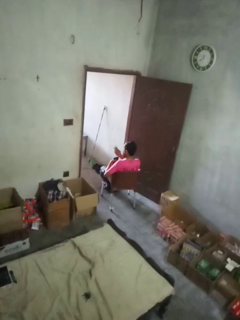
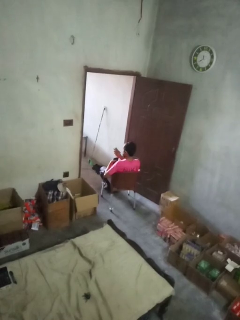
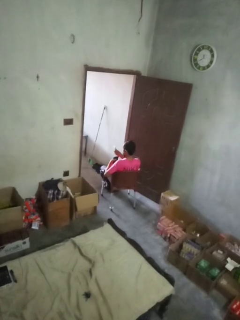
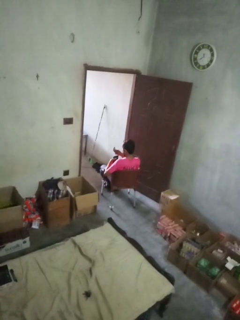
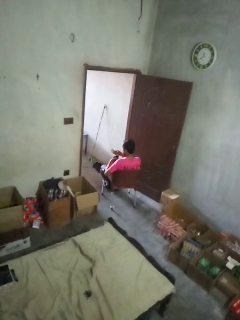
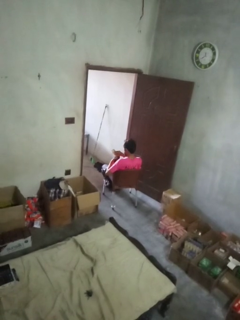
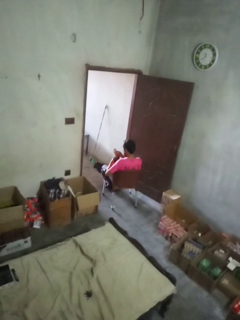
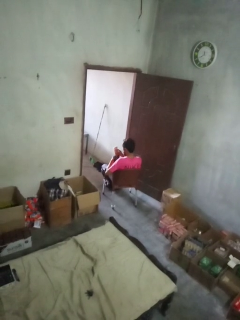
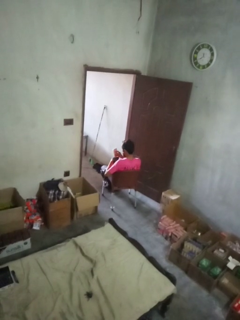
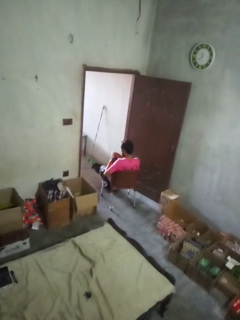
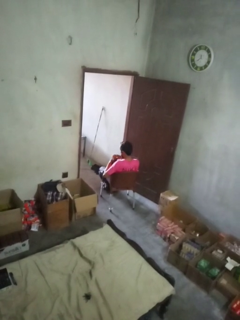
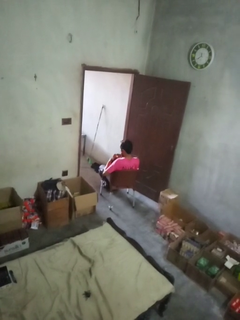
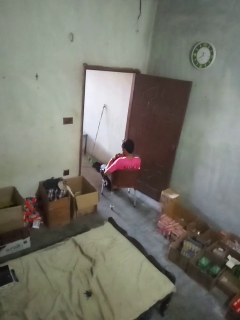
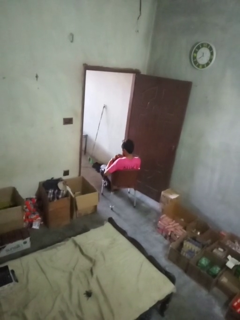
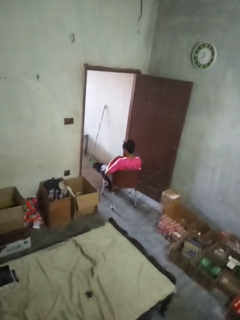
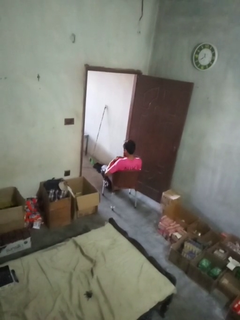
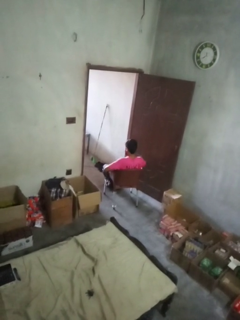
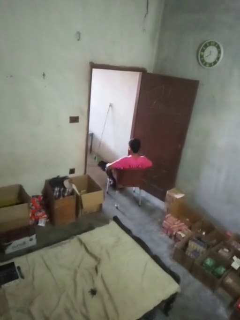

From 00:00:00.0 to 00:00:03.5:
person puts object into purse

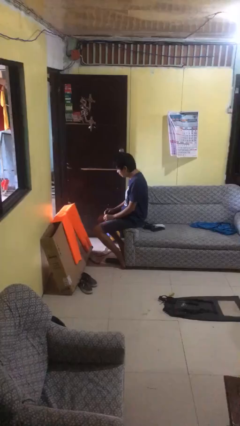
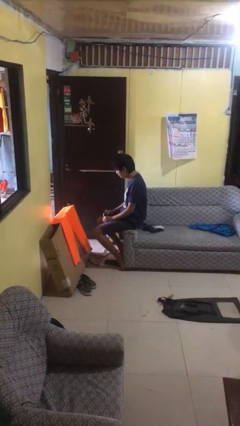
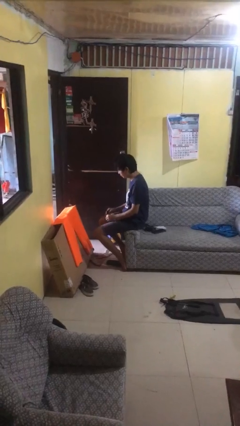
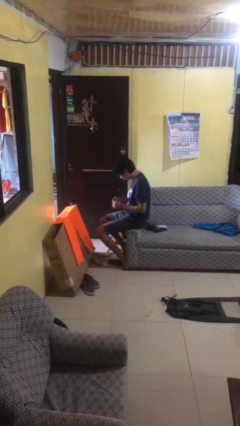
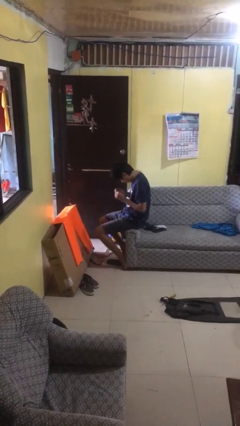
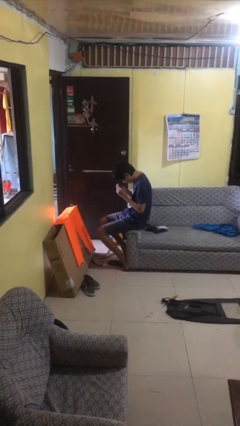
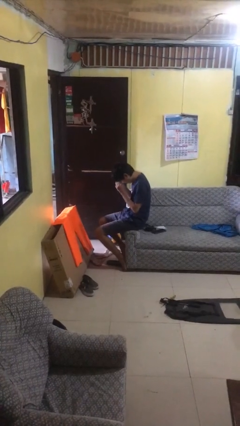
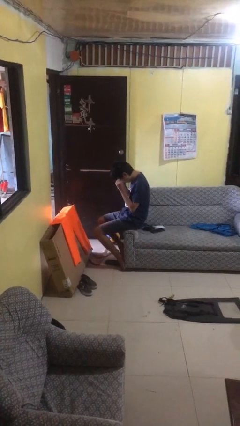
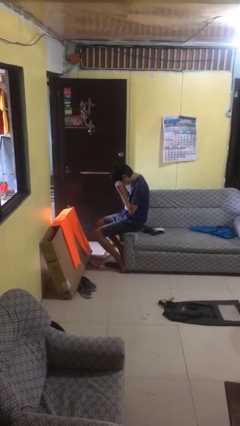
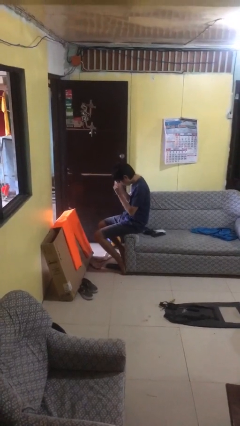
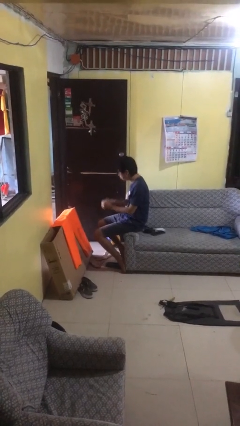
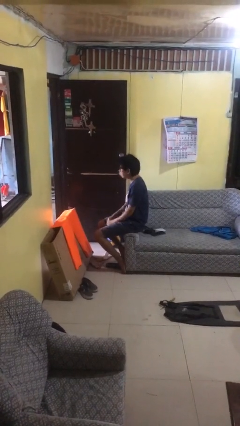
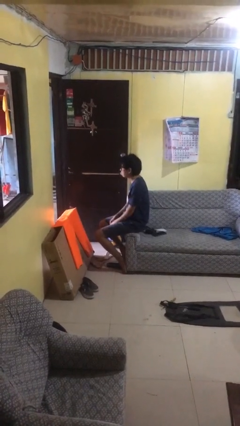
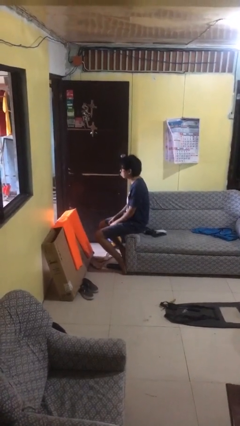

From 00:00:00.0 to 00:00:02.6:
person puts on glasses

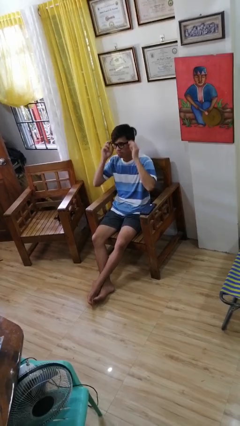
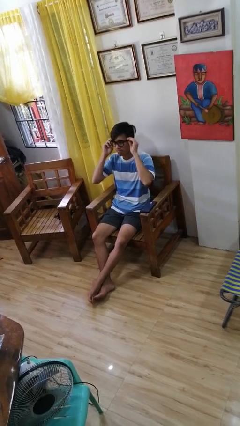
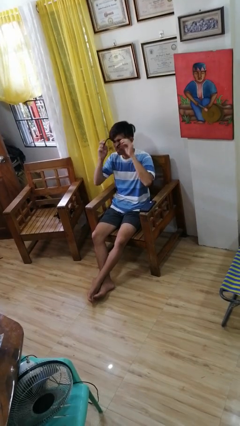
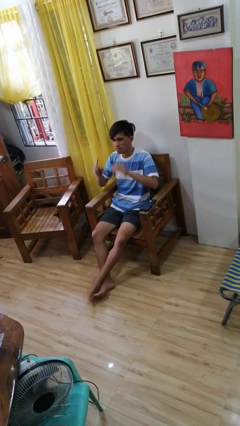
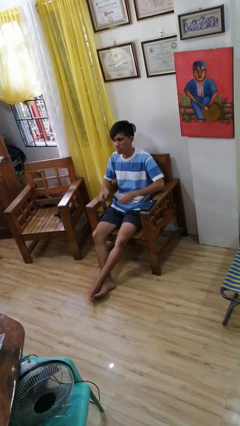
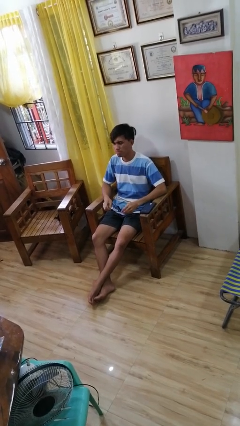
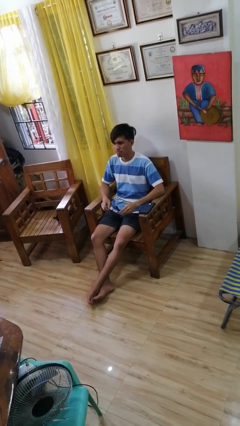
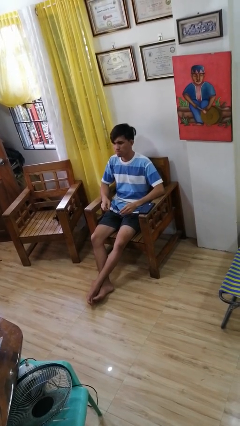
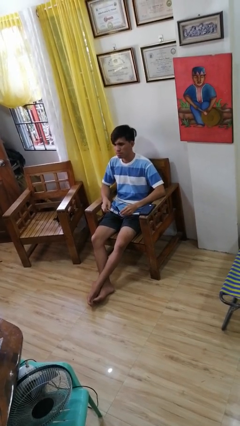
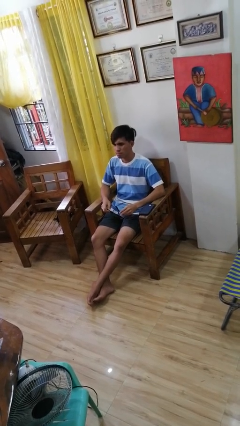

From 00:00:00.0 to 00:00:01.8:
person takes off glasses

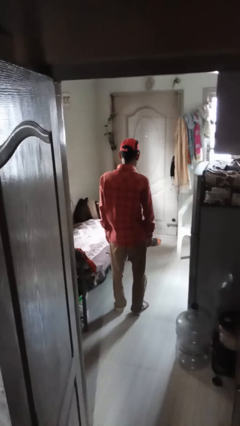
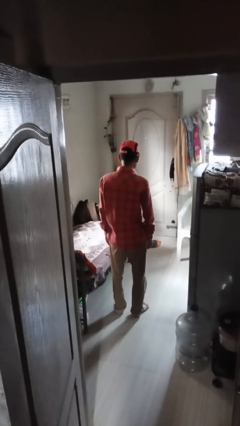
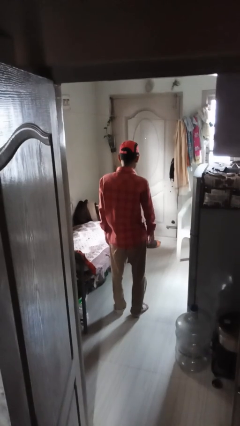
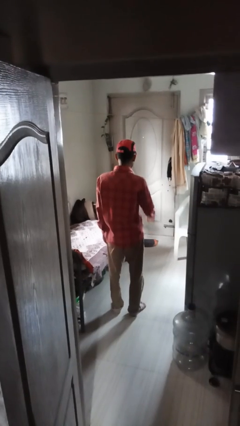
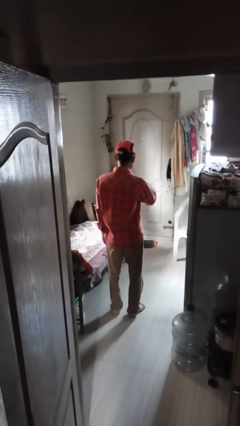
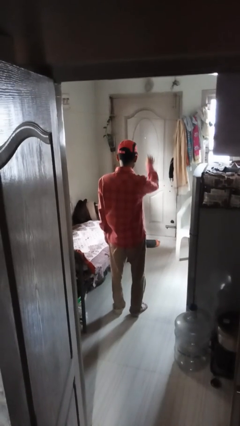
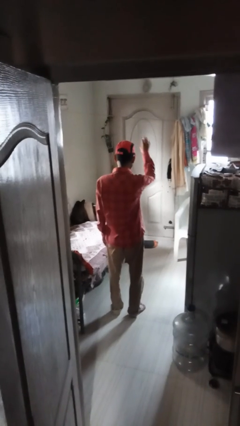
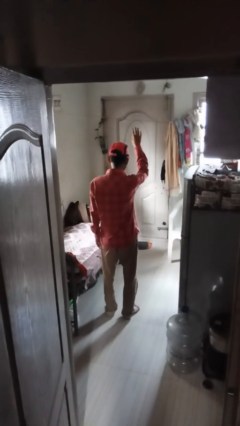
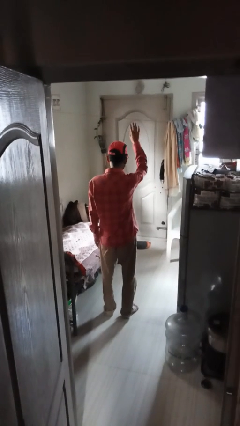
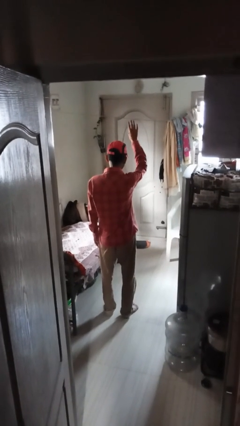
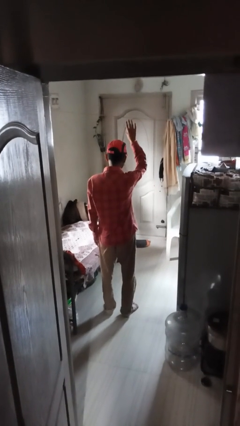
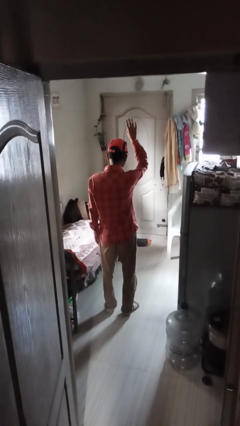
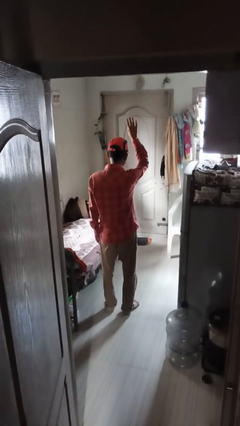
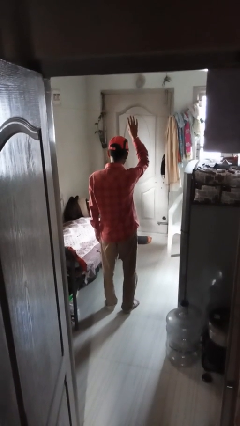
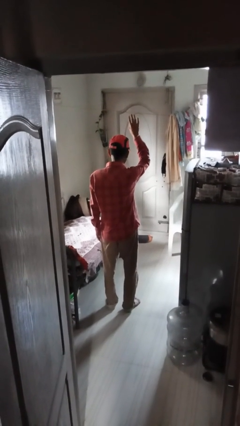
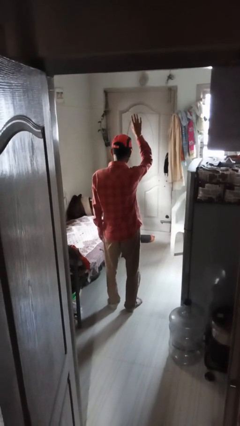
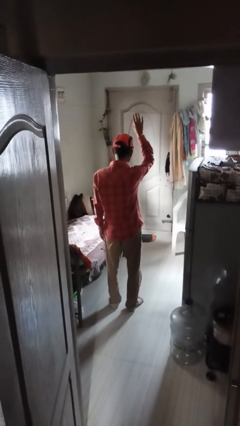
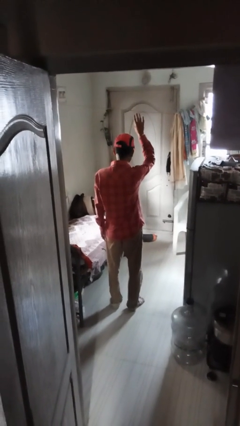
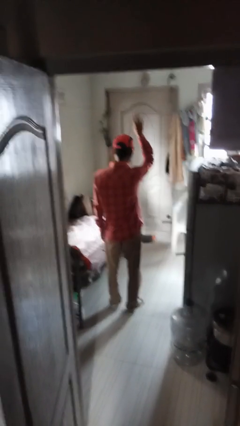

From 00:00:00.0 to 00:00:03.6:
person gestures raise hand

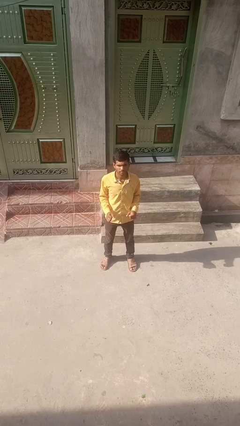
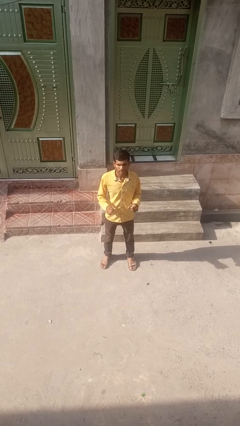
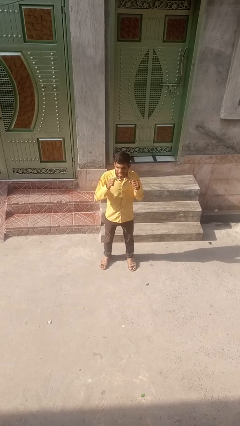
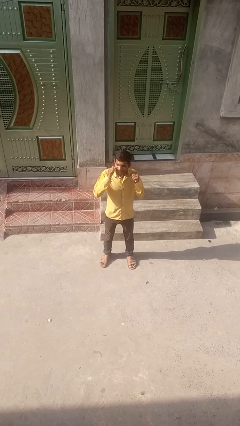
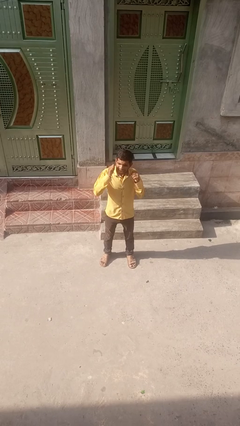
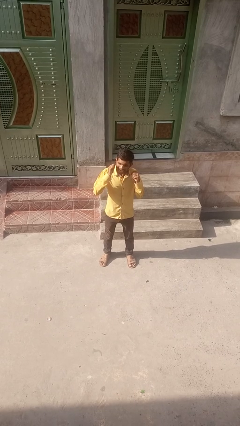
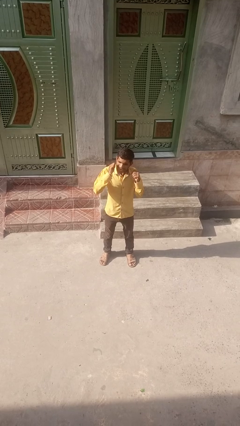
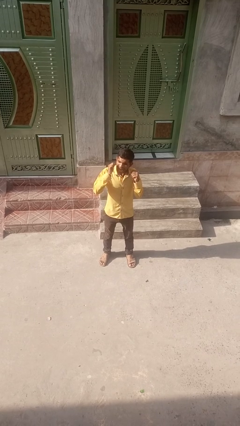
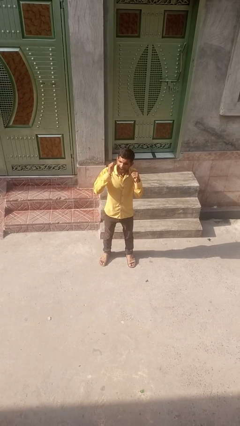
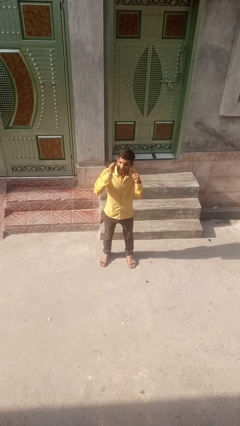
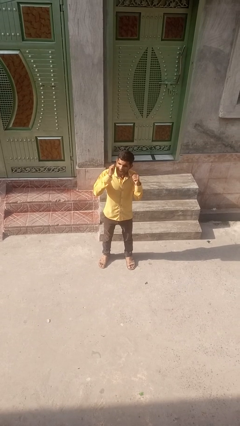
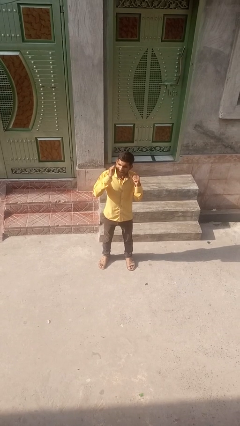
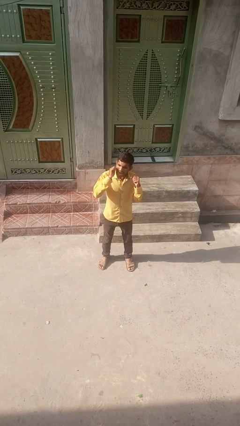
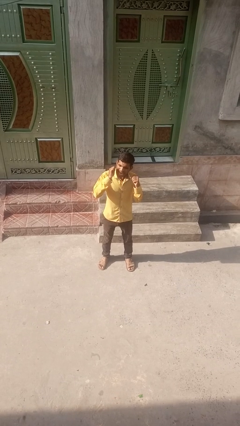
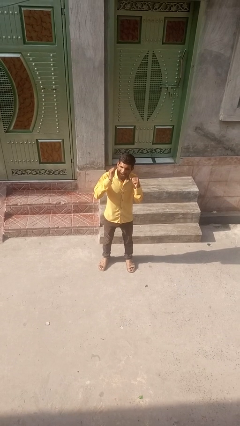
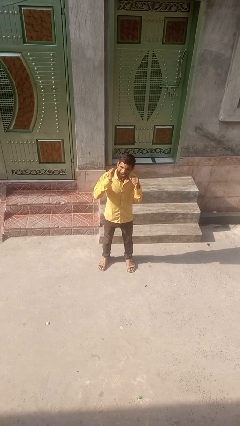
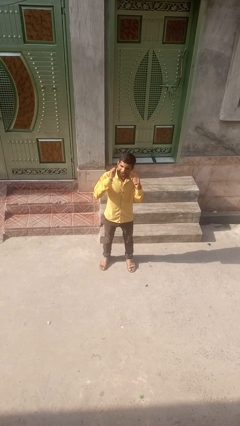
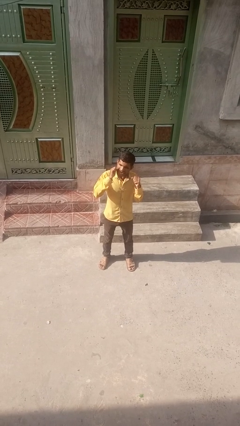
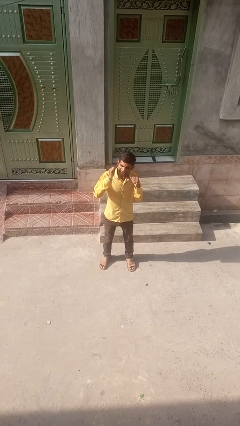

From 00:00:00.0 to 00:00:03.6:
person flosses

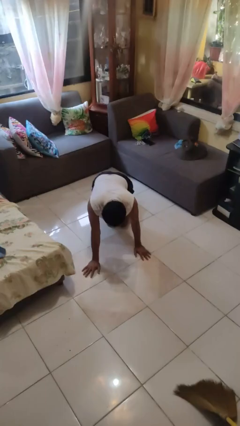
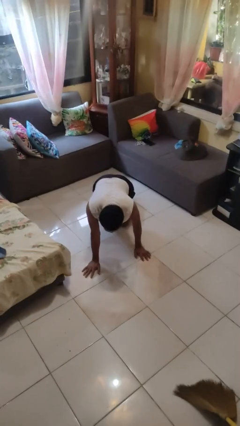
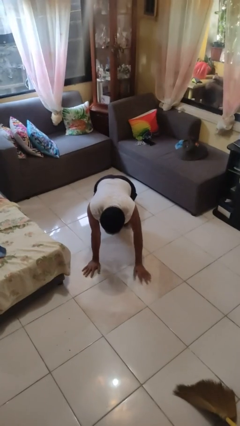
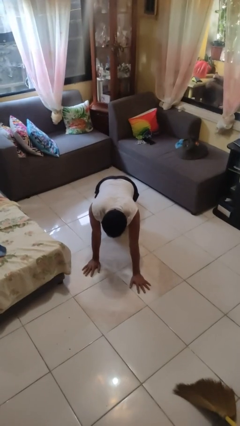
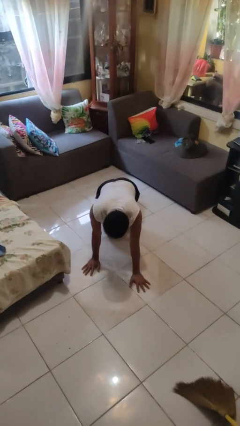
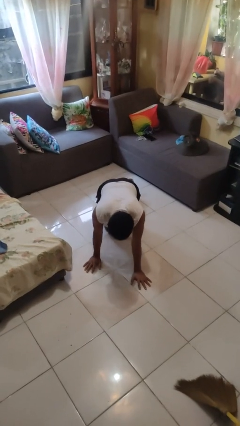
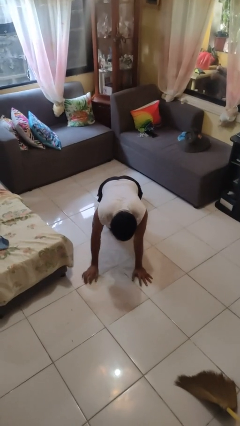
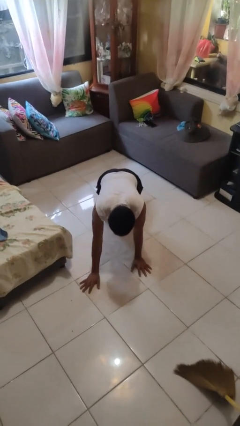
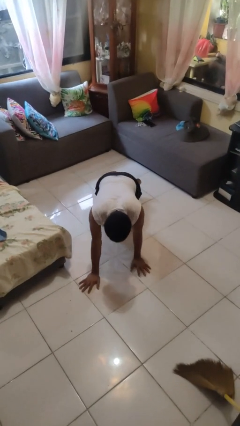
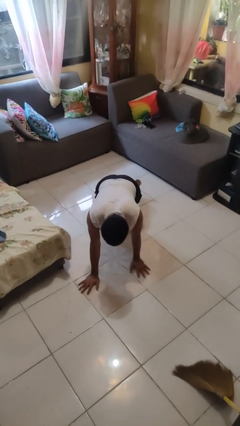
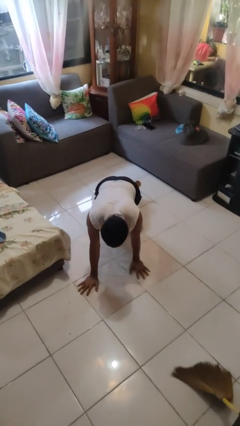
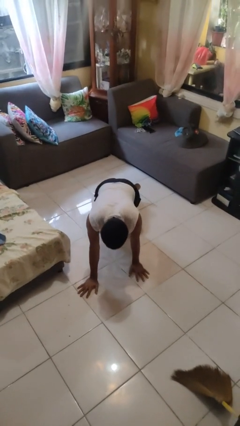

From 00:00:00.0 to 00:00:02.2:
person crawls

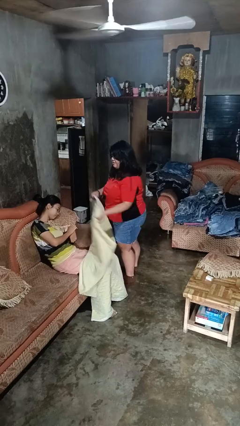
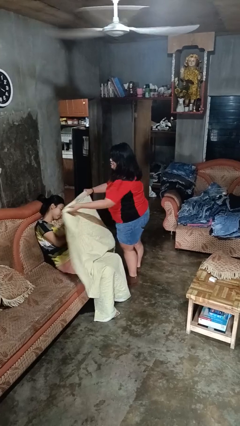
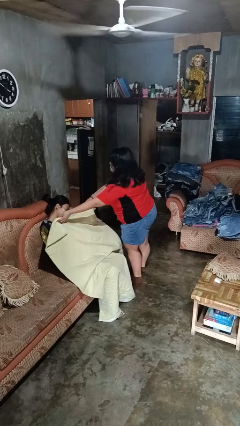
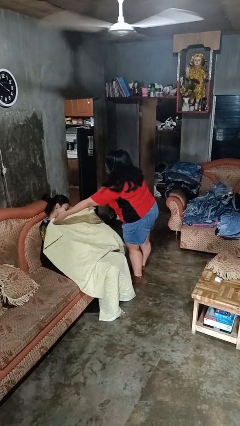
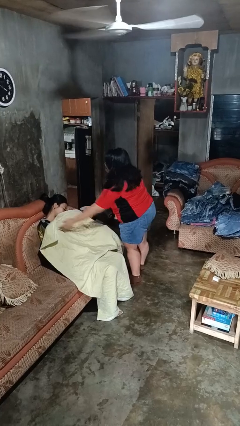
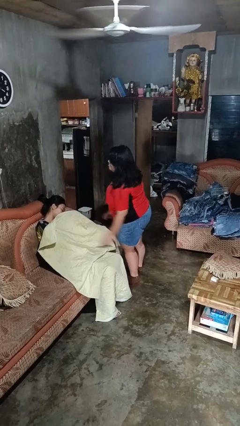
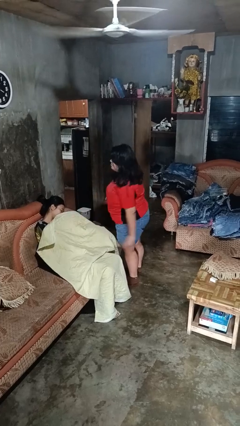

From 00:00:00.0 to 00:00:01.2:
person covers friend with blanket
